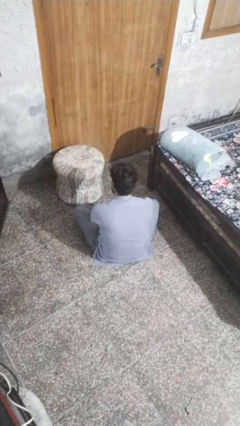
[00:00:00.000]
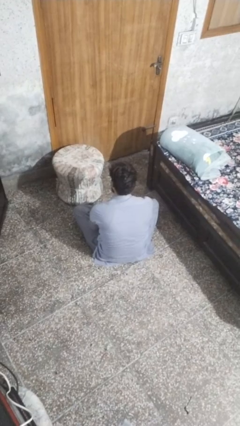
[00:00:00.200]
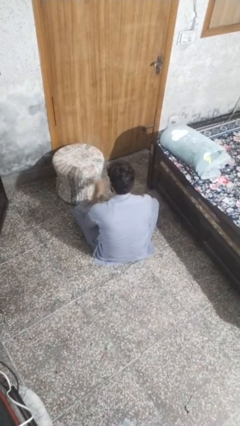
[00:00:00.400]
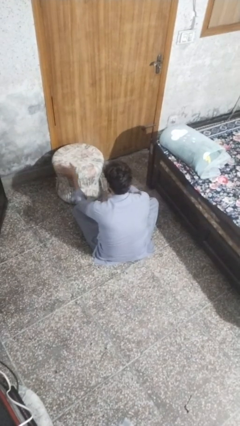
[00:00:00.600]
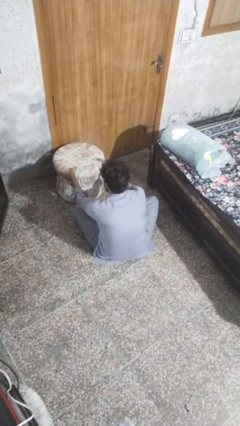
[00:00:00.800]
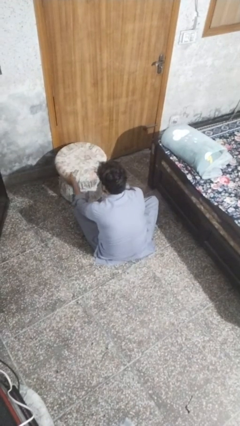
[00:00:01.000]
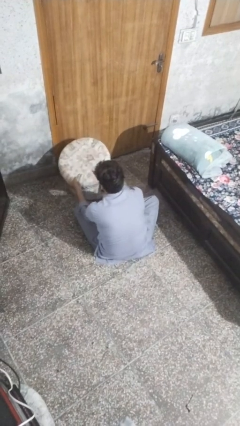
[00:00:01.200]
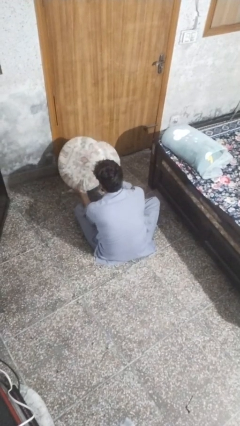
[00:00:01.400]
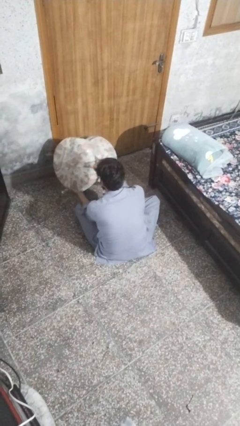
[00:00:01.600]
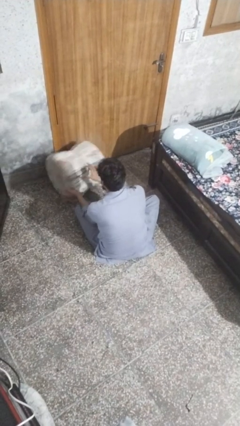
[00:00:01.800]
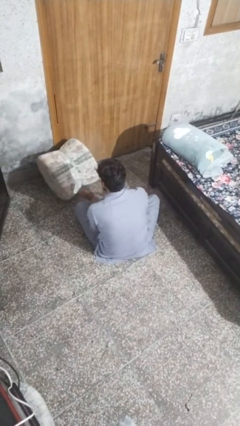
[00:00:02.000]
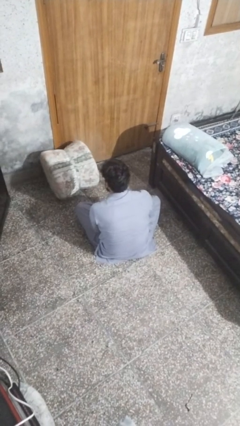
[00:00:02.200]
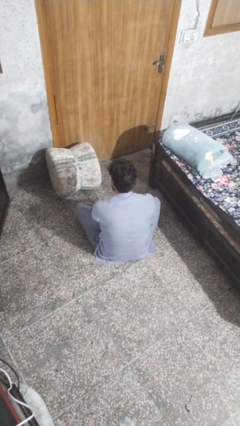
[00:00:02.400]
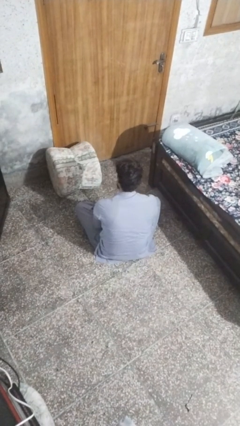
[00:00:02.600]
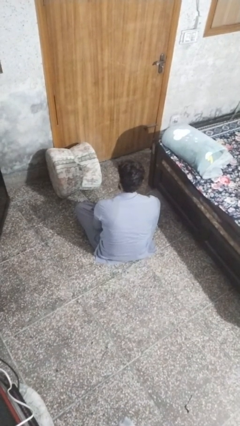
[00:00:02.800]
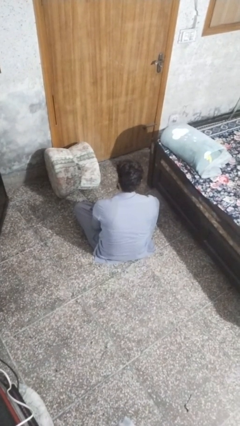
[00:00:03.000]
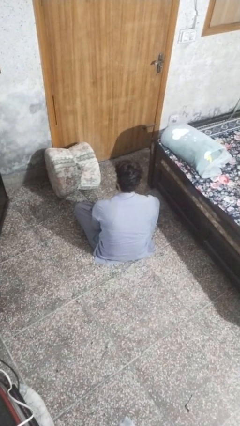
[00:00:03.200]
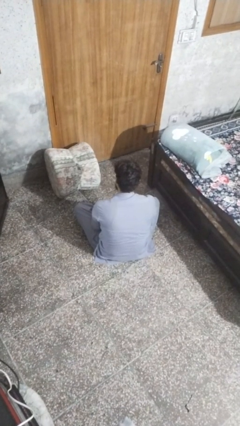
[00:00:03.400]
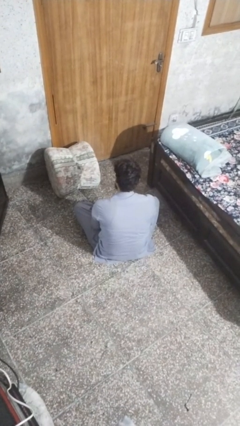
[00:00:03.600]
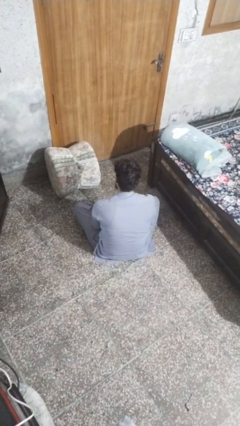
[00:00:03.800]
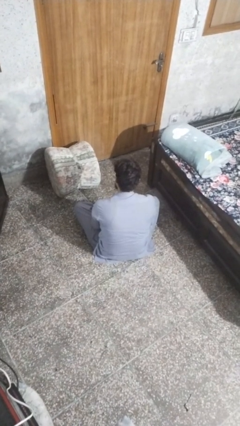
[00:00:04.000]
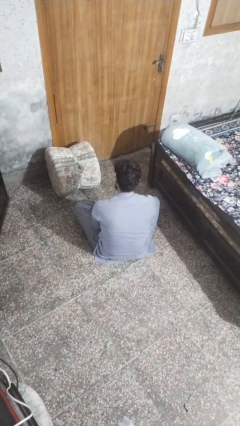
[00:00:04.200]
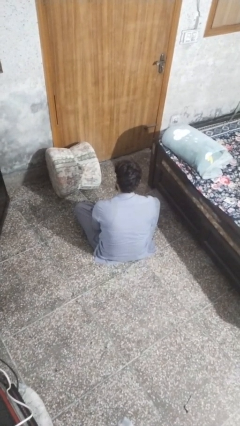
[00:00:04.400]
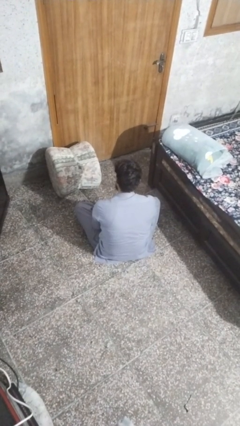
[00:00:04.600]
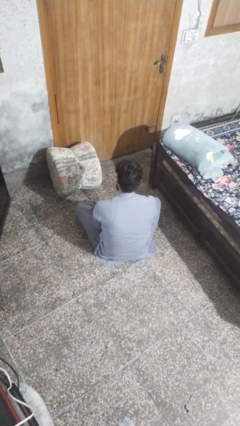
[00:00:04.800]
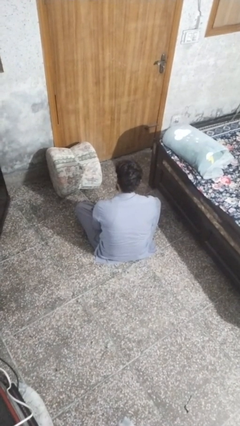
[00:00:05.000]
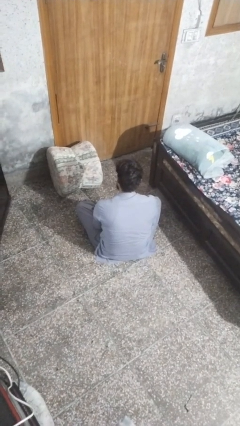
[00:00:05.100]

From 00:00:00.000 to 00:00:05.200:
person knocks over furniture

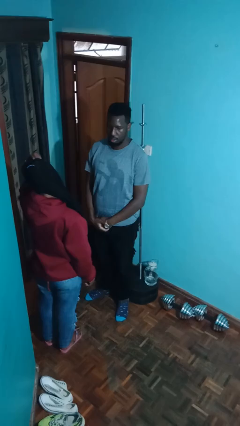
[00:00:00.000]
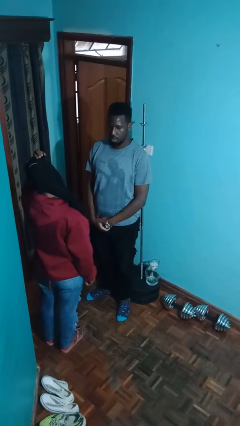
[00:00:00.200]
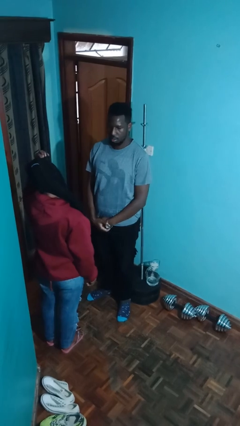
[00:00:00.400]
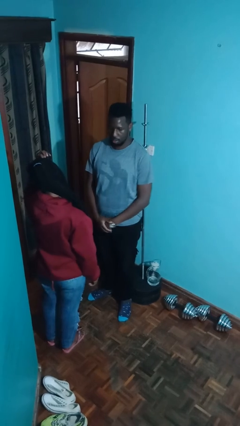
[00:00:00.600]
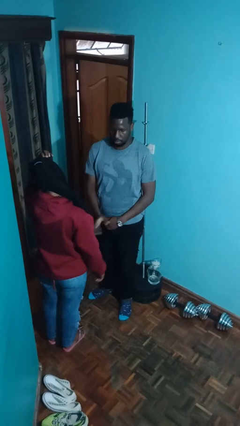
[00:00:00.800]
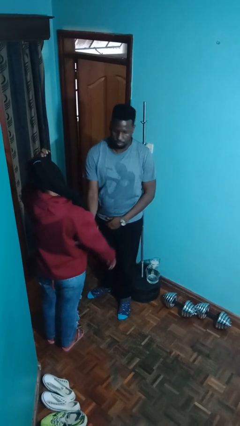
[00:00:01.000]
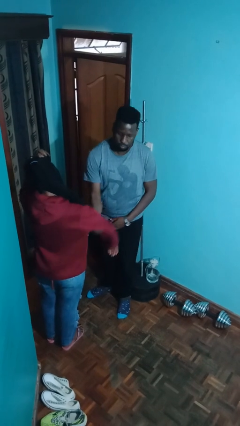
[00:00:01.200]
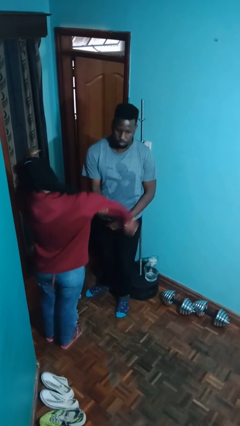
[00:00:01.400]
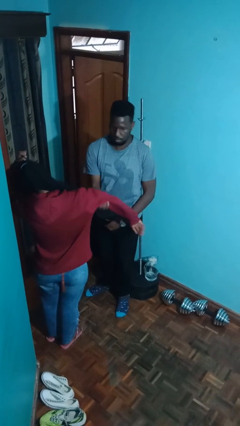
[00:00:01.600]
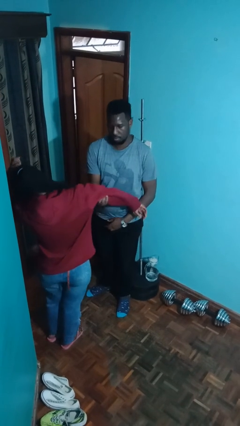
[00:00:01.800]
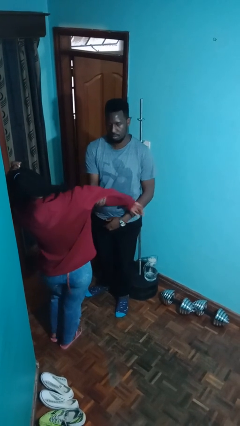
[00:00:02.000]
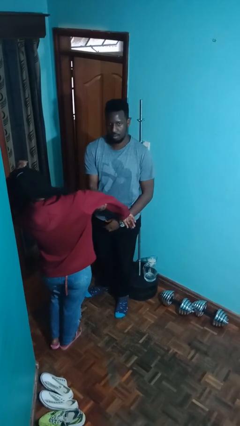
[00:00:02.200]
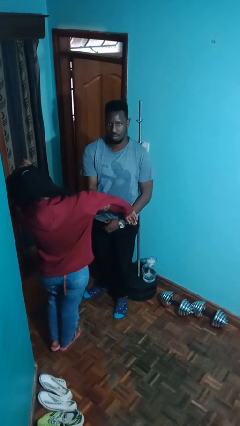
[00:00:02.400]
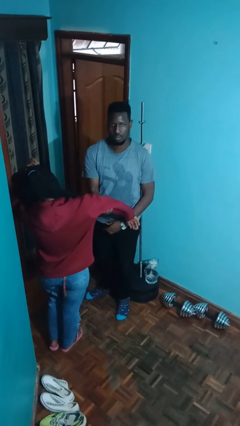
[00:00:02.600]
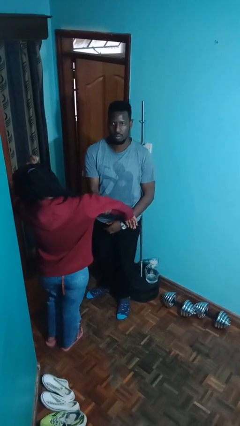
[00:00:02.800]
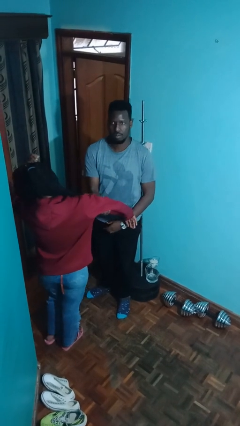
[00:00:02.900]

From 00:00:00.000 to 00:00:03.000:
person grabs person by bicep

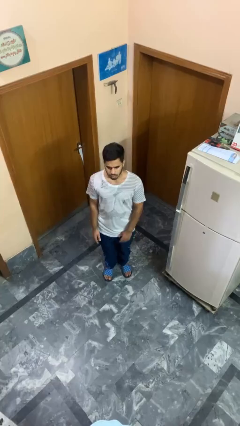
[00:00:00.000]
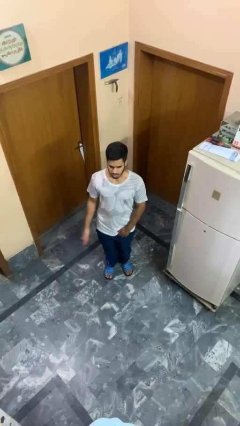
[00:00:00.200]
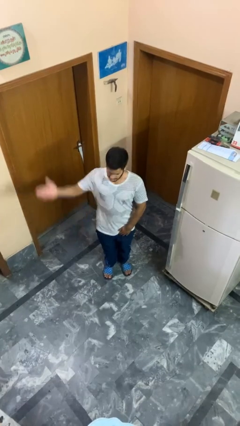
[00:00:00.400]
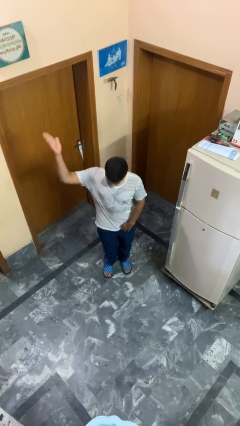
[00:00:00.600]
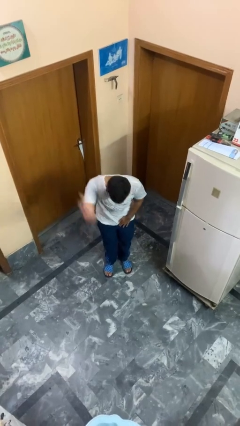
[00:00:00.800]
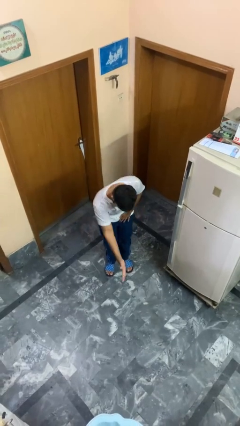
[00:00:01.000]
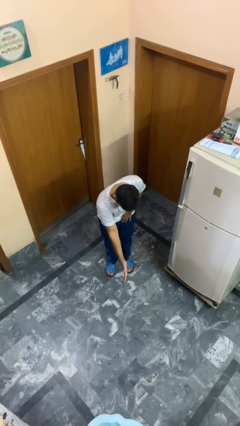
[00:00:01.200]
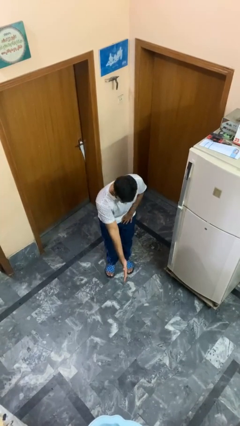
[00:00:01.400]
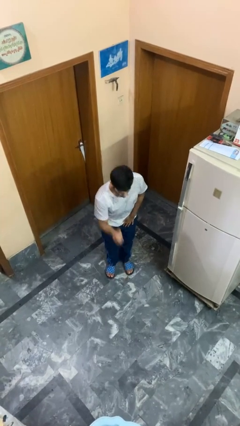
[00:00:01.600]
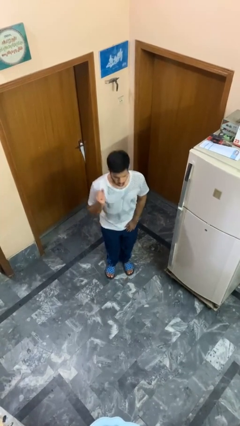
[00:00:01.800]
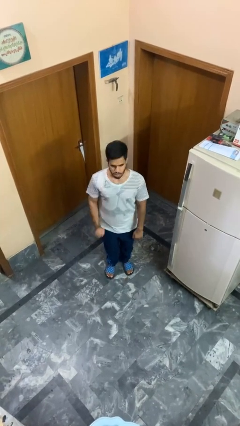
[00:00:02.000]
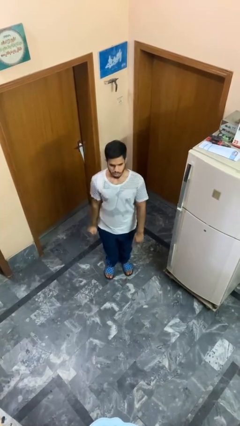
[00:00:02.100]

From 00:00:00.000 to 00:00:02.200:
person karate chop

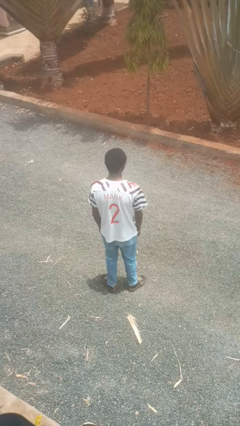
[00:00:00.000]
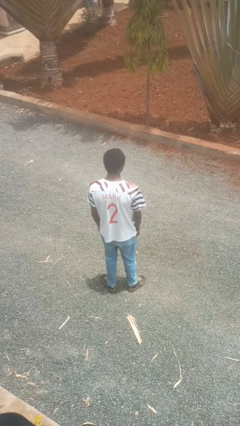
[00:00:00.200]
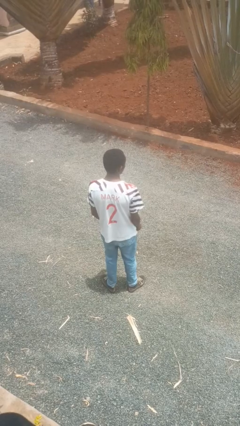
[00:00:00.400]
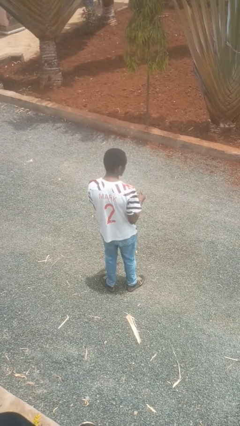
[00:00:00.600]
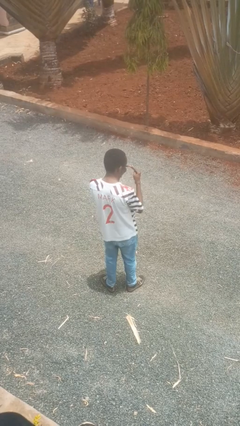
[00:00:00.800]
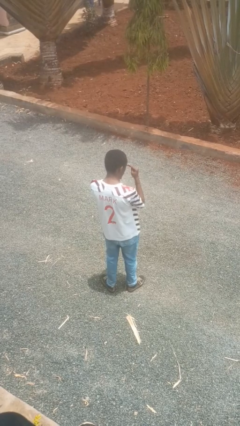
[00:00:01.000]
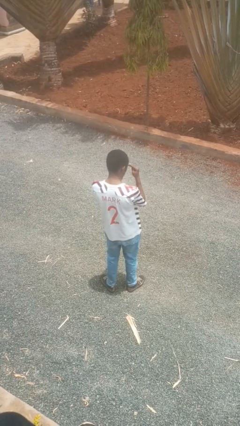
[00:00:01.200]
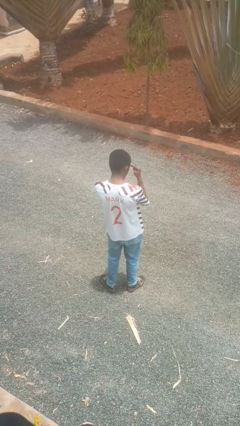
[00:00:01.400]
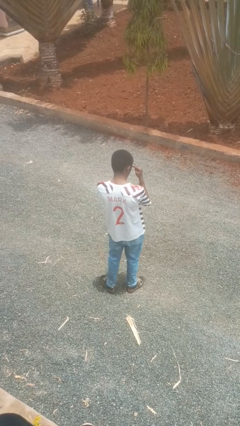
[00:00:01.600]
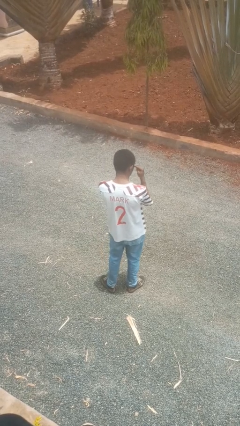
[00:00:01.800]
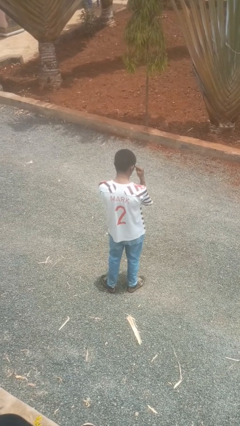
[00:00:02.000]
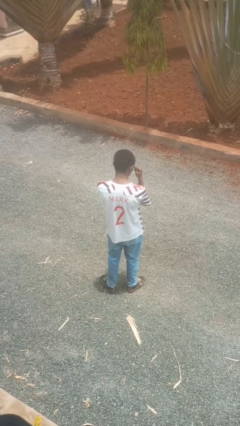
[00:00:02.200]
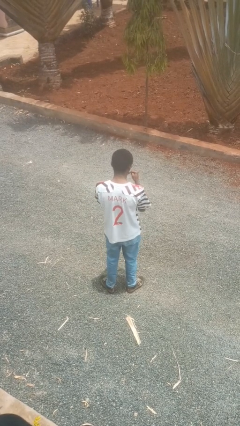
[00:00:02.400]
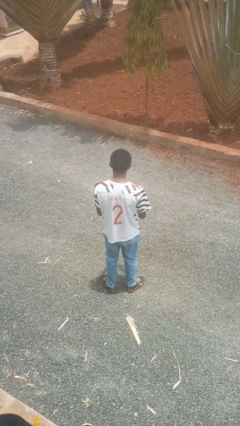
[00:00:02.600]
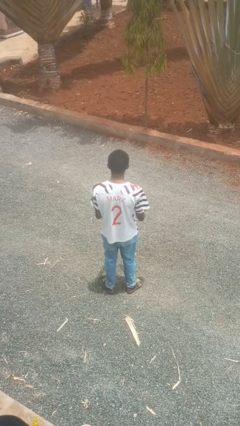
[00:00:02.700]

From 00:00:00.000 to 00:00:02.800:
person gestures watch closely

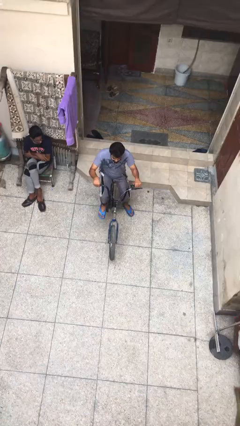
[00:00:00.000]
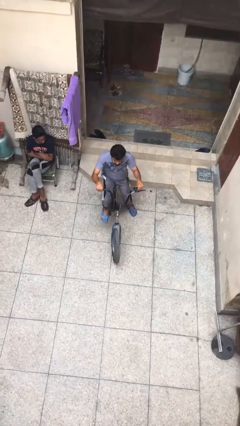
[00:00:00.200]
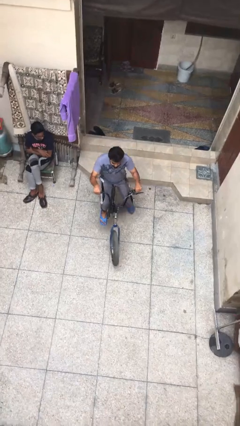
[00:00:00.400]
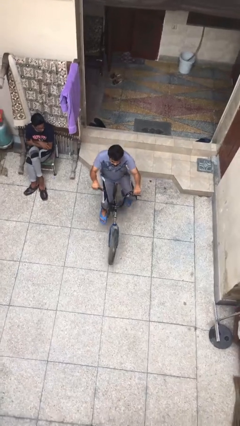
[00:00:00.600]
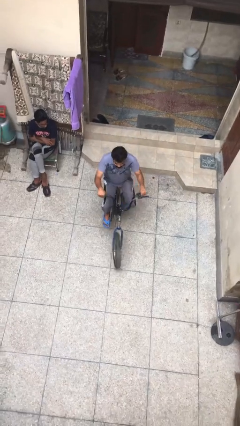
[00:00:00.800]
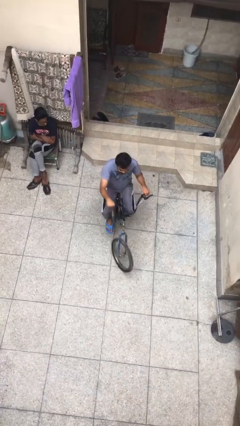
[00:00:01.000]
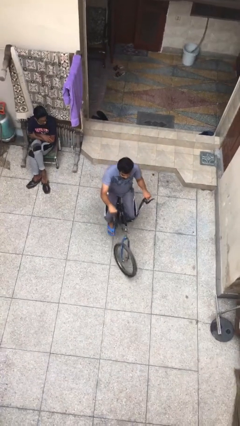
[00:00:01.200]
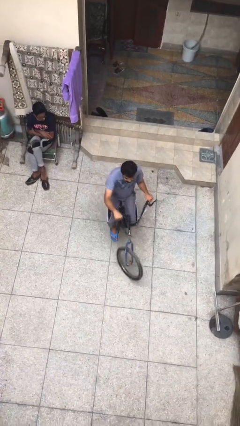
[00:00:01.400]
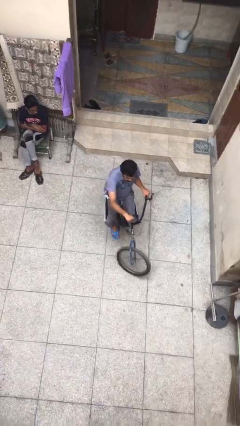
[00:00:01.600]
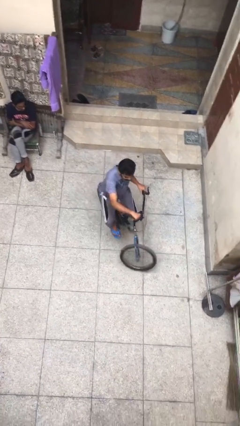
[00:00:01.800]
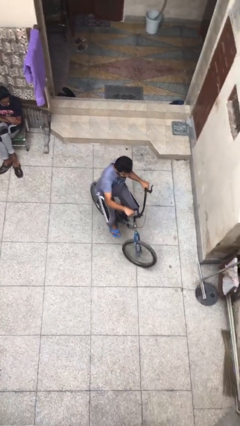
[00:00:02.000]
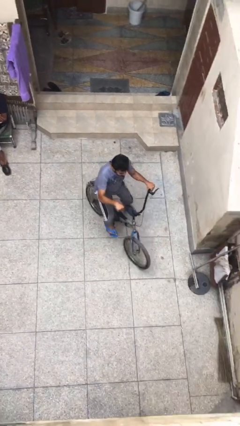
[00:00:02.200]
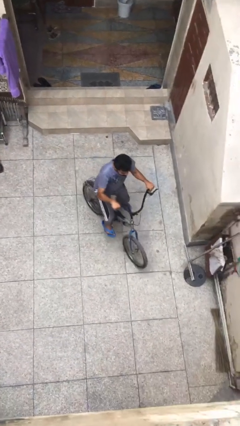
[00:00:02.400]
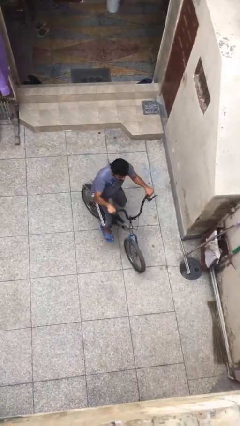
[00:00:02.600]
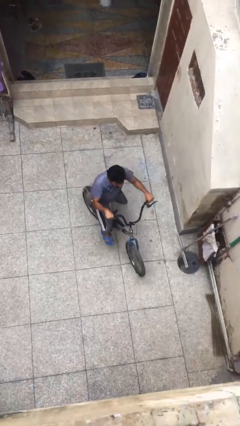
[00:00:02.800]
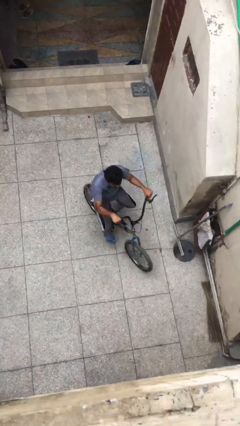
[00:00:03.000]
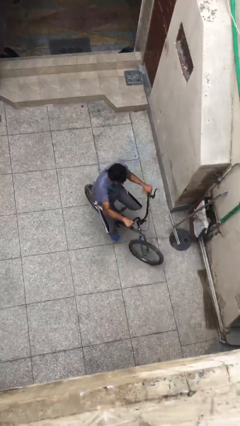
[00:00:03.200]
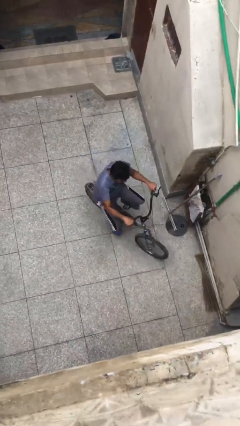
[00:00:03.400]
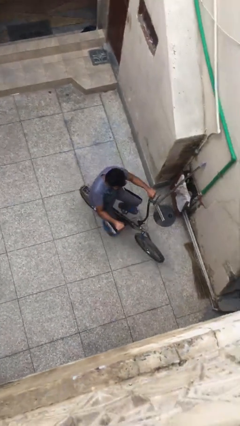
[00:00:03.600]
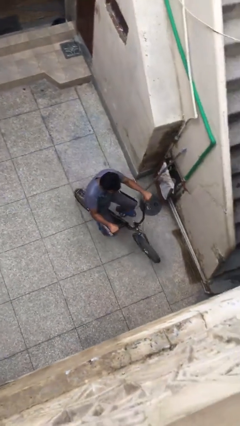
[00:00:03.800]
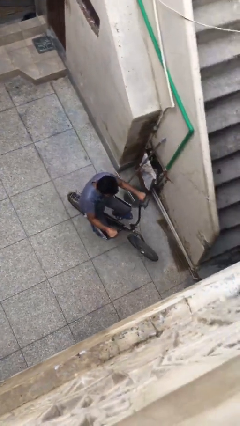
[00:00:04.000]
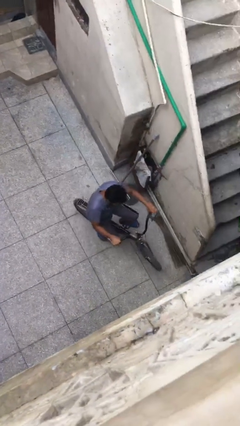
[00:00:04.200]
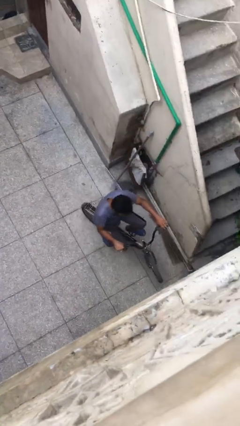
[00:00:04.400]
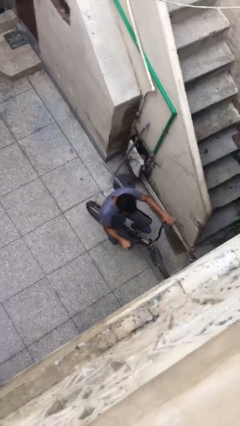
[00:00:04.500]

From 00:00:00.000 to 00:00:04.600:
person rides bicycle
